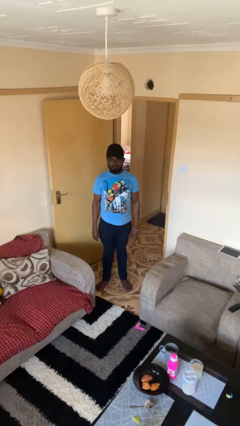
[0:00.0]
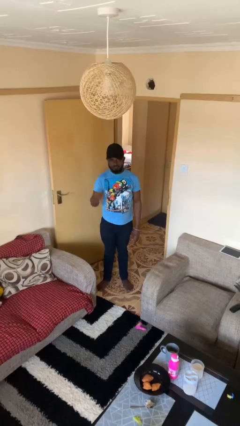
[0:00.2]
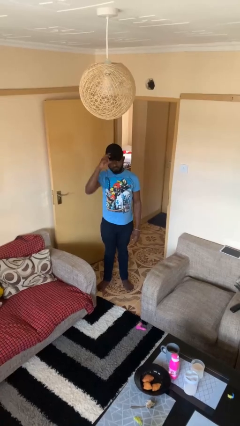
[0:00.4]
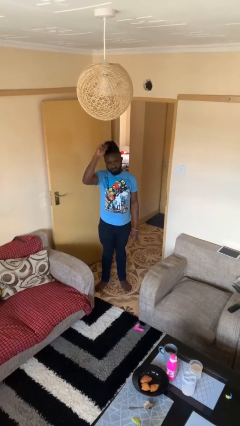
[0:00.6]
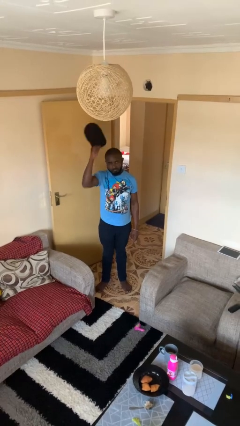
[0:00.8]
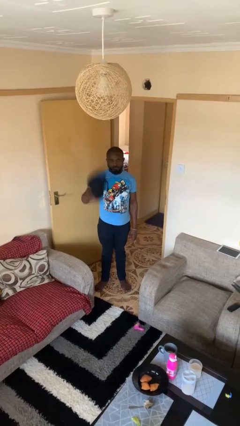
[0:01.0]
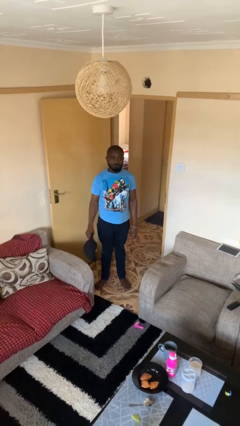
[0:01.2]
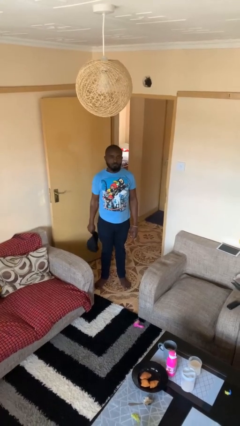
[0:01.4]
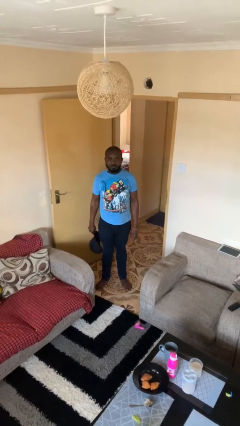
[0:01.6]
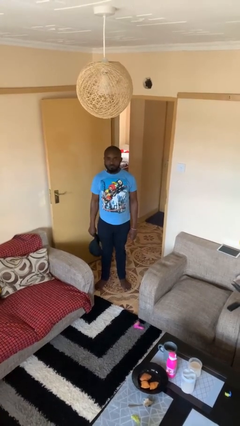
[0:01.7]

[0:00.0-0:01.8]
person takes off hat

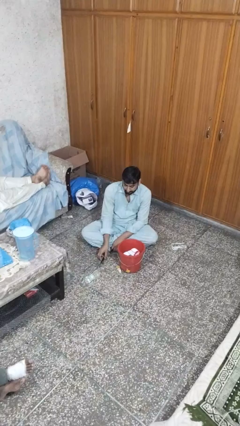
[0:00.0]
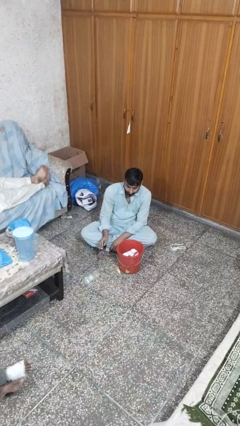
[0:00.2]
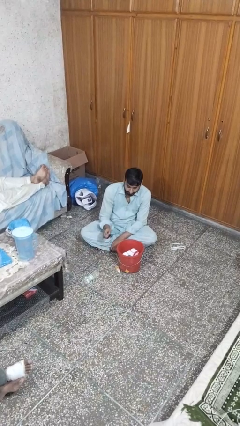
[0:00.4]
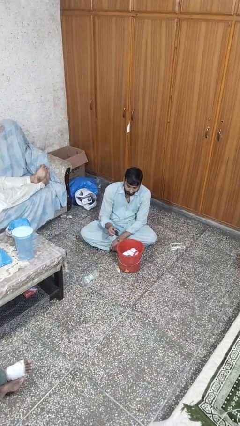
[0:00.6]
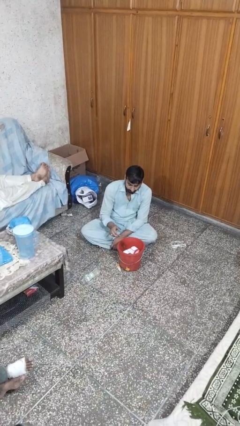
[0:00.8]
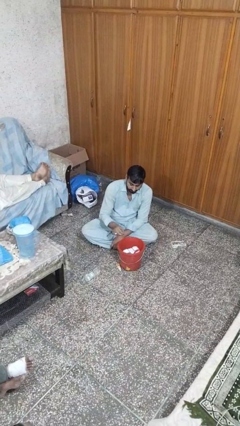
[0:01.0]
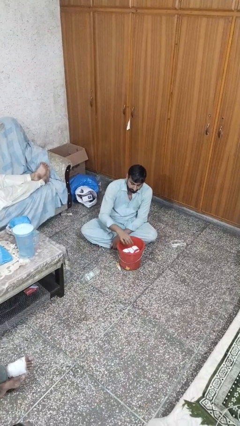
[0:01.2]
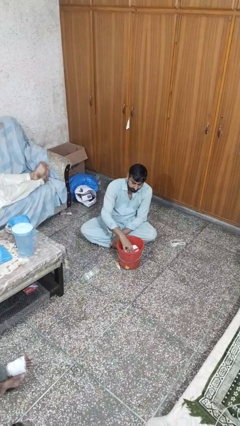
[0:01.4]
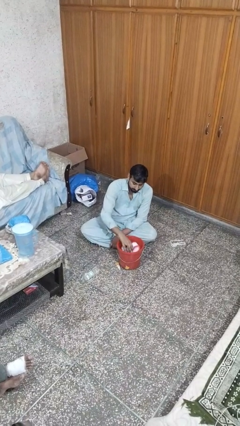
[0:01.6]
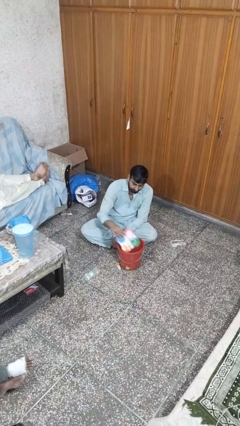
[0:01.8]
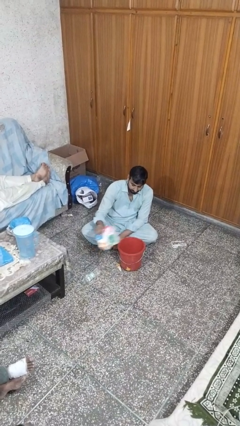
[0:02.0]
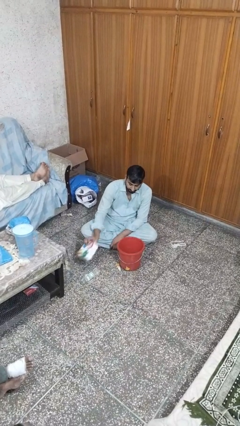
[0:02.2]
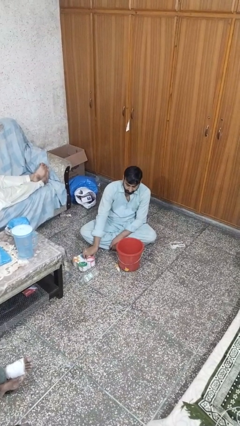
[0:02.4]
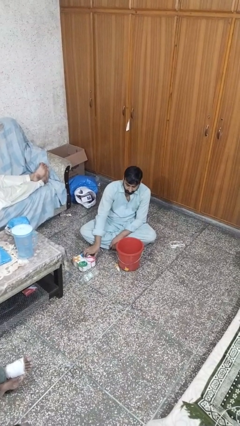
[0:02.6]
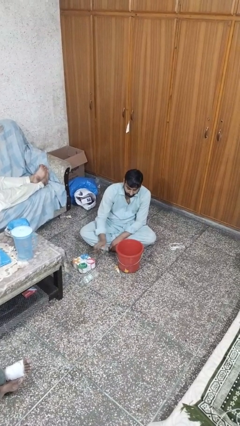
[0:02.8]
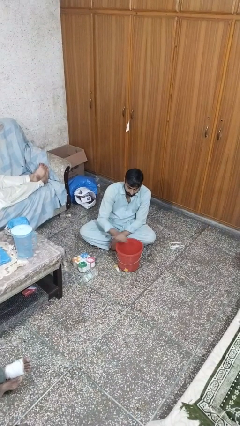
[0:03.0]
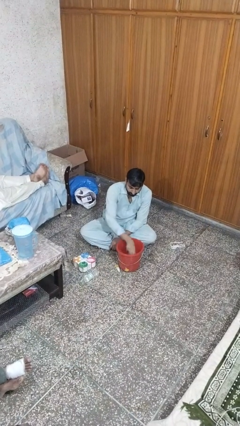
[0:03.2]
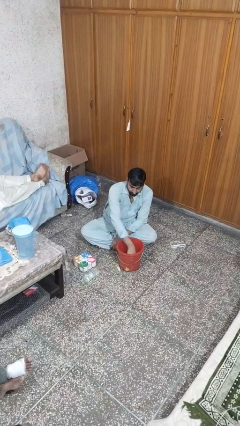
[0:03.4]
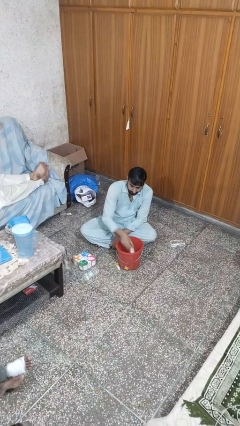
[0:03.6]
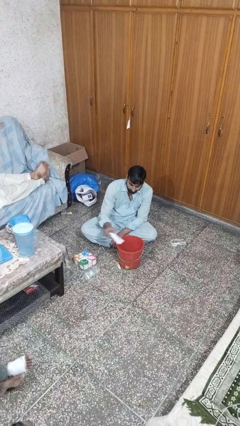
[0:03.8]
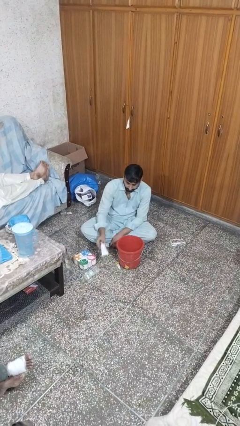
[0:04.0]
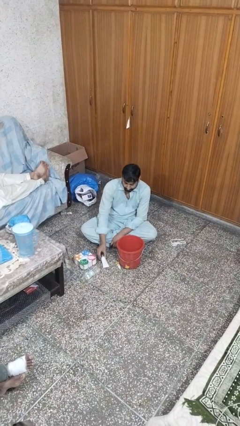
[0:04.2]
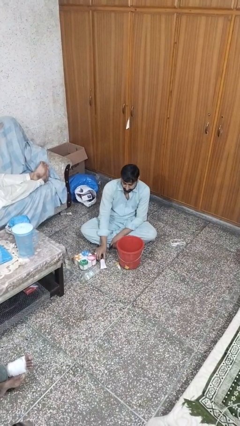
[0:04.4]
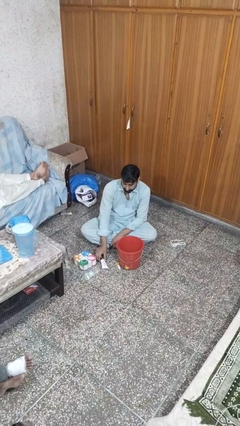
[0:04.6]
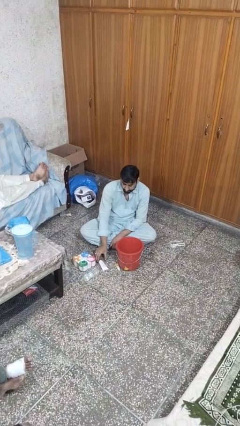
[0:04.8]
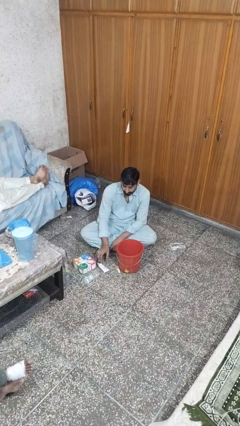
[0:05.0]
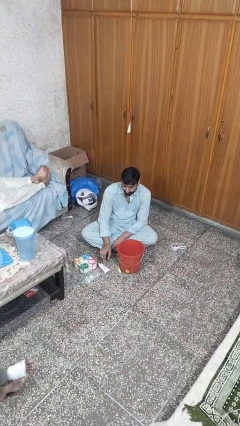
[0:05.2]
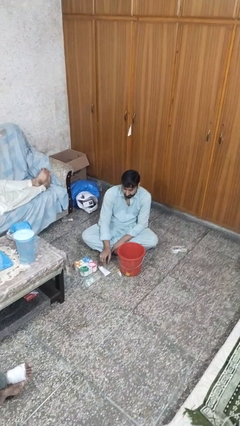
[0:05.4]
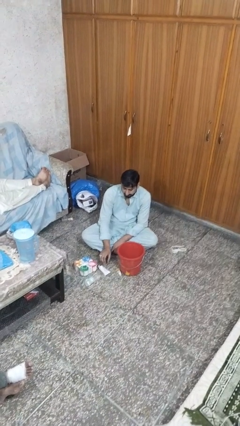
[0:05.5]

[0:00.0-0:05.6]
person takes object from basket

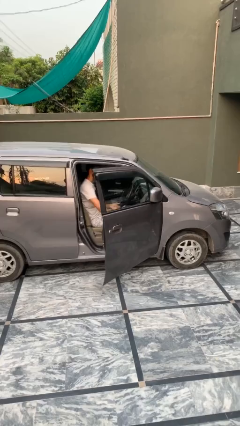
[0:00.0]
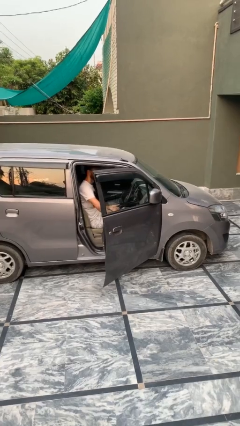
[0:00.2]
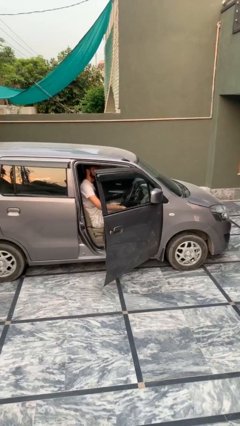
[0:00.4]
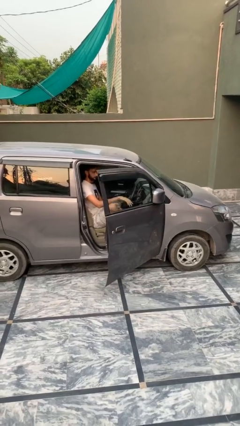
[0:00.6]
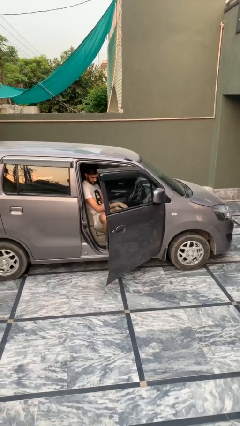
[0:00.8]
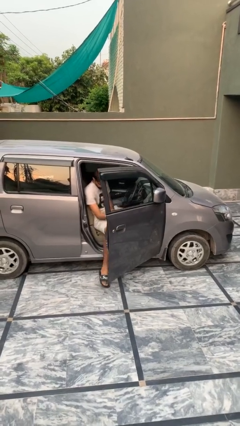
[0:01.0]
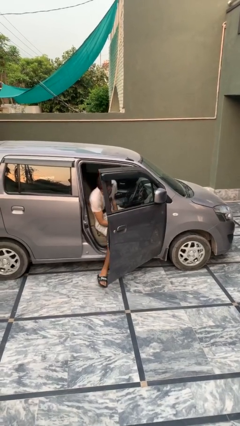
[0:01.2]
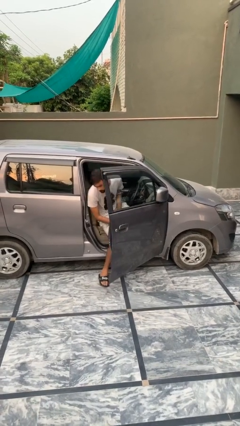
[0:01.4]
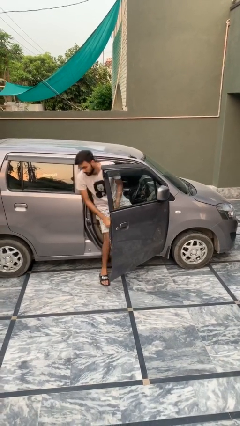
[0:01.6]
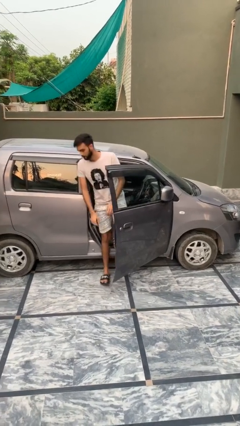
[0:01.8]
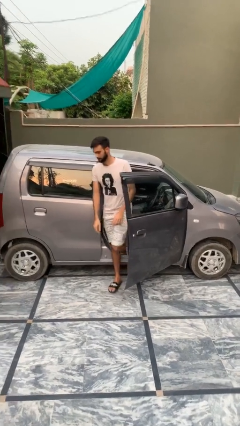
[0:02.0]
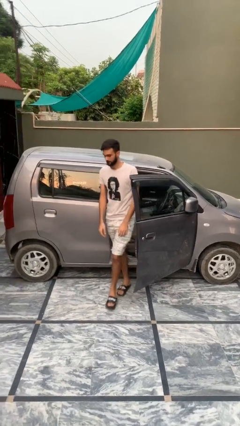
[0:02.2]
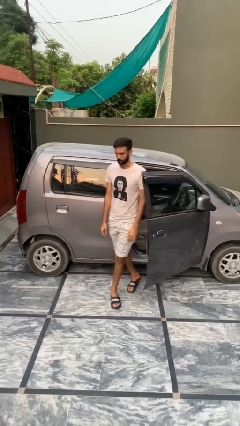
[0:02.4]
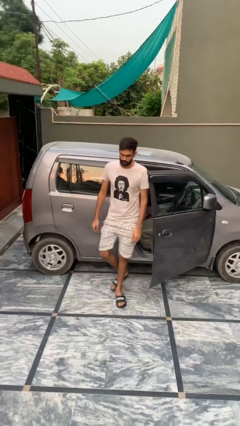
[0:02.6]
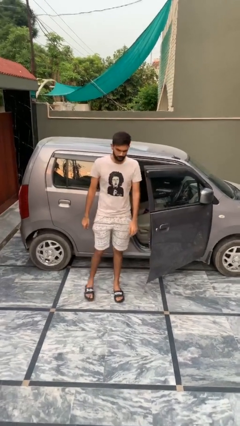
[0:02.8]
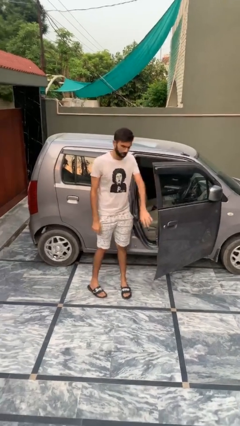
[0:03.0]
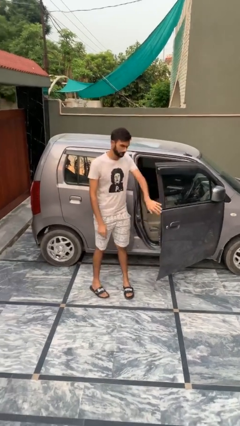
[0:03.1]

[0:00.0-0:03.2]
person exits car

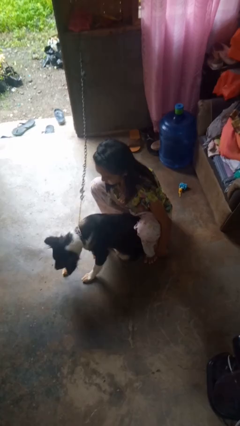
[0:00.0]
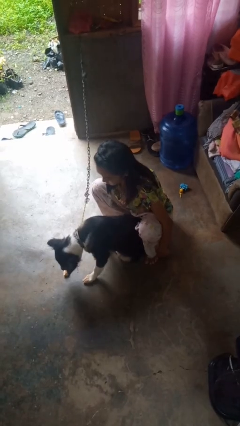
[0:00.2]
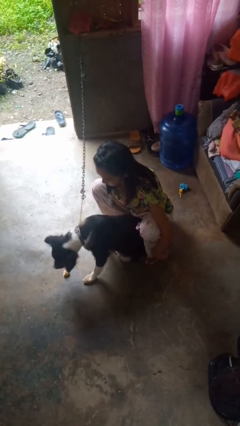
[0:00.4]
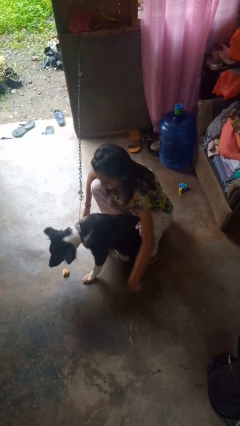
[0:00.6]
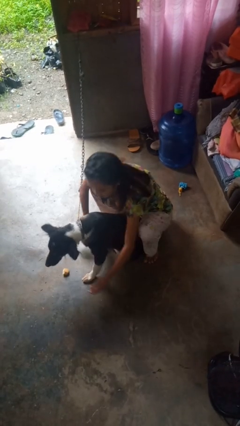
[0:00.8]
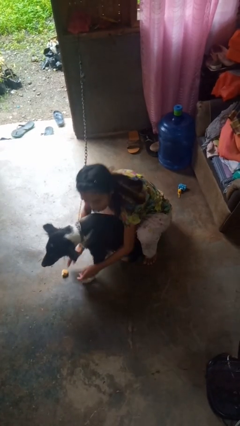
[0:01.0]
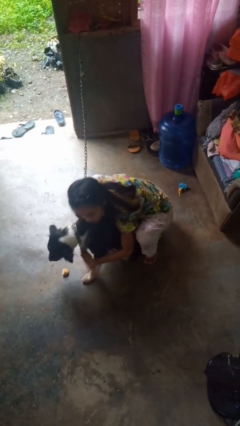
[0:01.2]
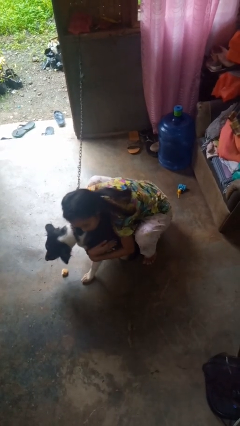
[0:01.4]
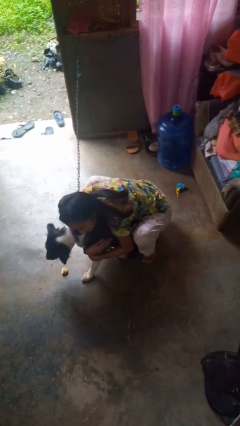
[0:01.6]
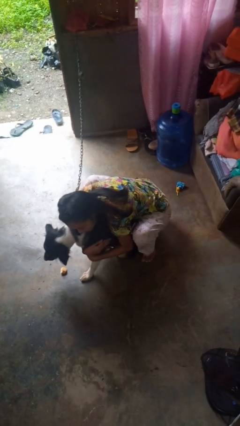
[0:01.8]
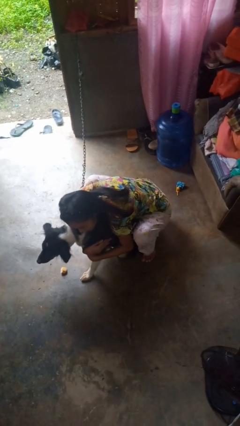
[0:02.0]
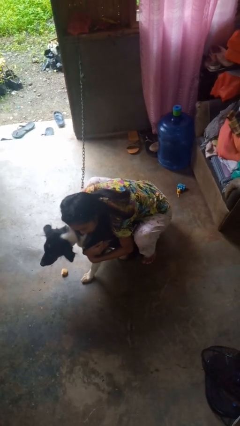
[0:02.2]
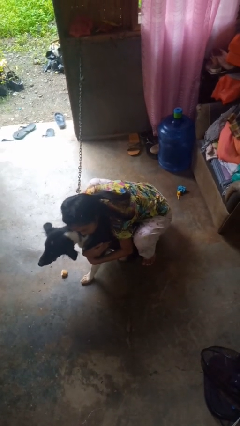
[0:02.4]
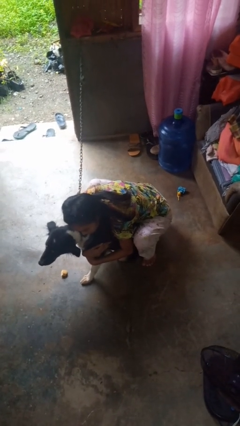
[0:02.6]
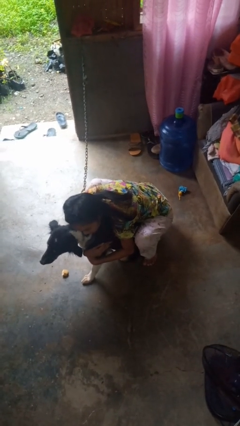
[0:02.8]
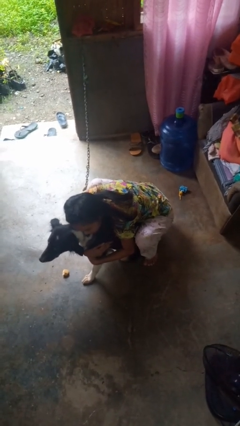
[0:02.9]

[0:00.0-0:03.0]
person hugs dog

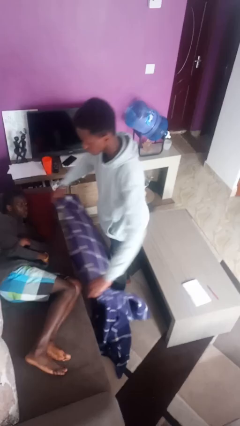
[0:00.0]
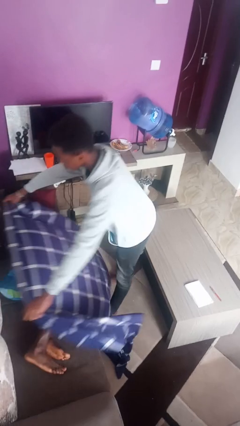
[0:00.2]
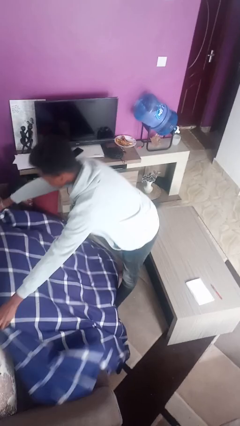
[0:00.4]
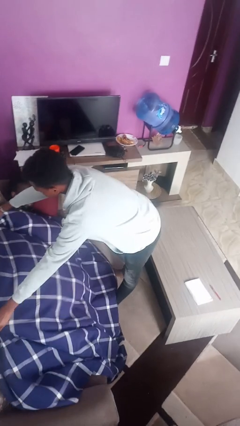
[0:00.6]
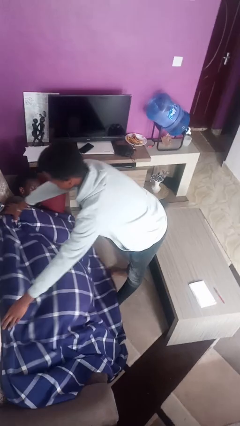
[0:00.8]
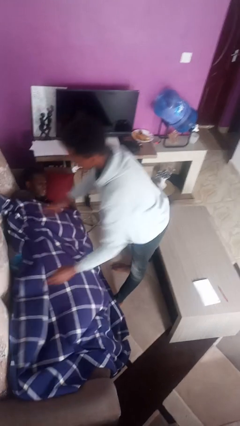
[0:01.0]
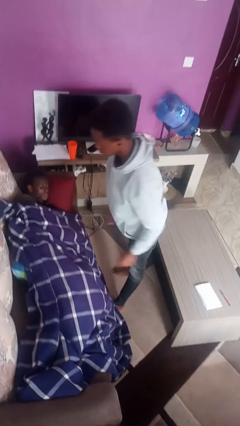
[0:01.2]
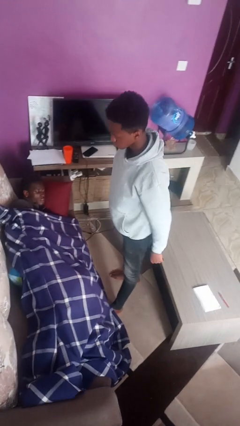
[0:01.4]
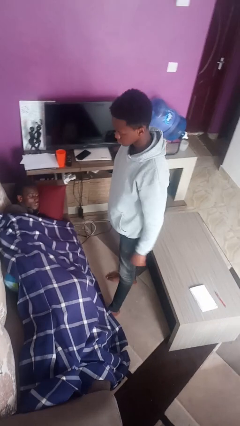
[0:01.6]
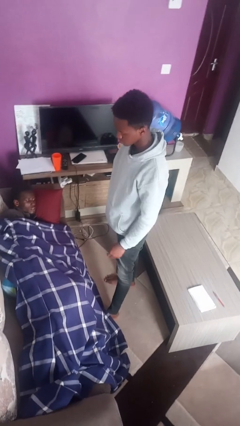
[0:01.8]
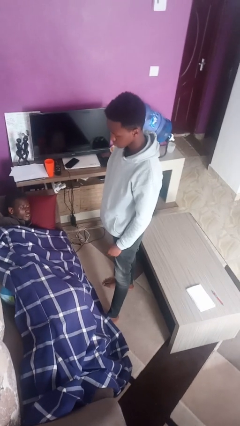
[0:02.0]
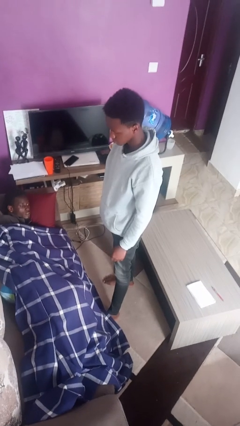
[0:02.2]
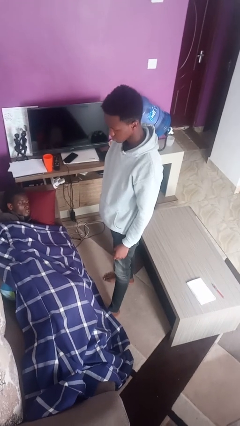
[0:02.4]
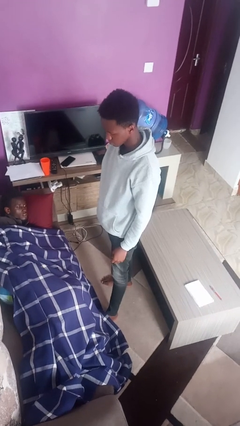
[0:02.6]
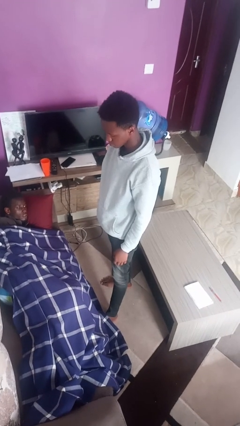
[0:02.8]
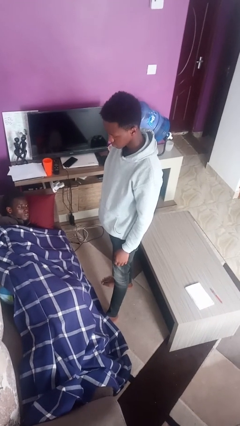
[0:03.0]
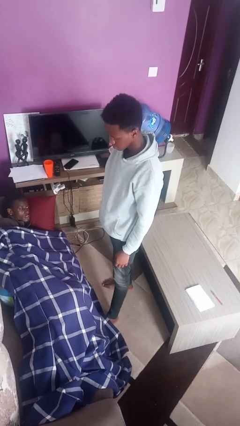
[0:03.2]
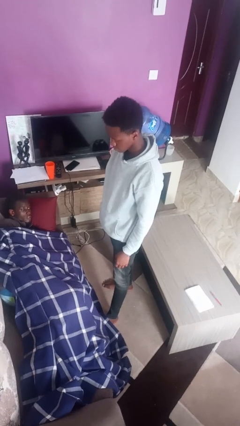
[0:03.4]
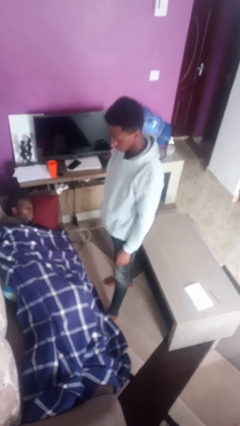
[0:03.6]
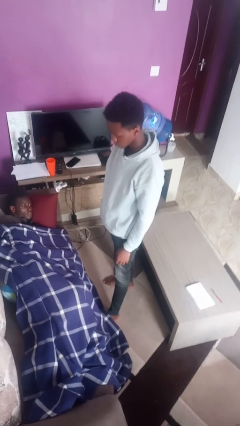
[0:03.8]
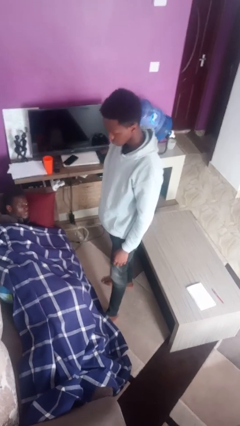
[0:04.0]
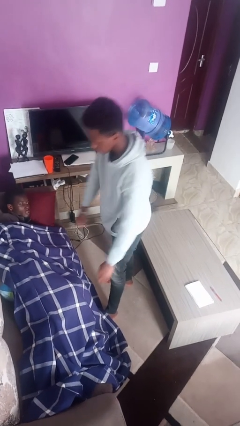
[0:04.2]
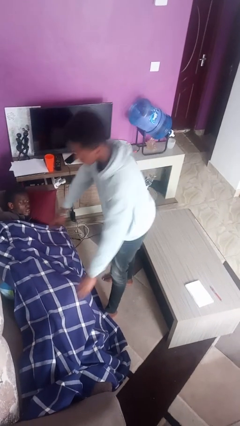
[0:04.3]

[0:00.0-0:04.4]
person covers friend with blanket

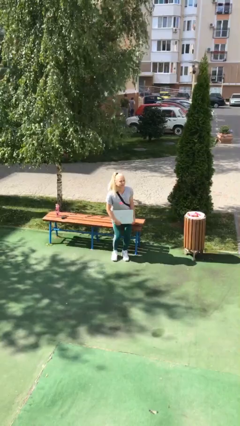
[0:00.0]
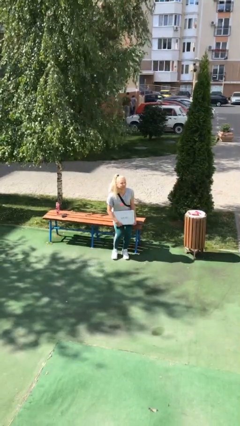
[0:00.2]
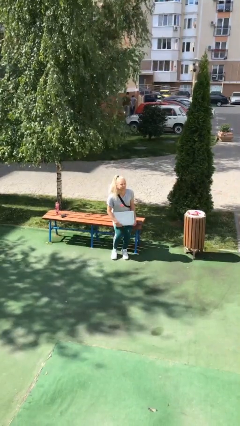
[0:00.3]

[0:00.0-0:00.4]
person sits down
